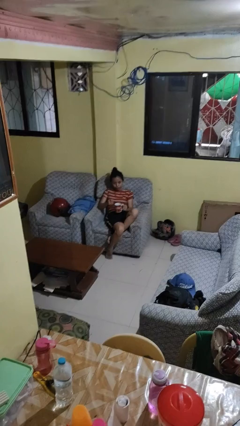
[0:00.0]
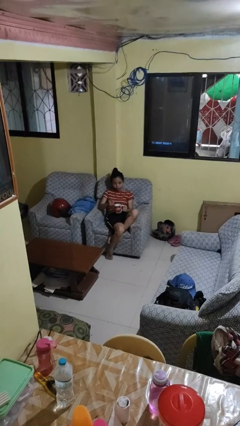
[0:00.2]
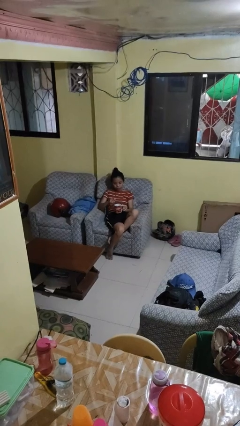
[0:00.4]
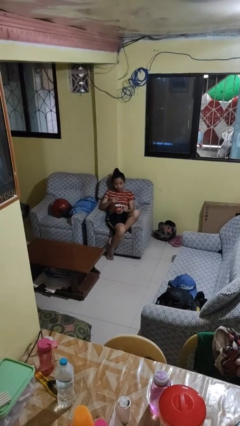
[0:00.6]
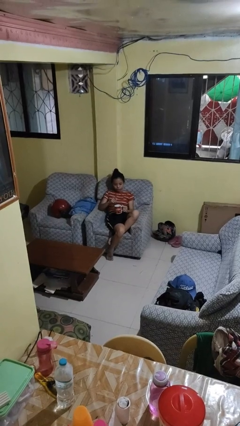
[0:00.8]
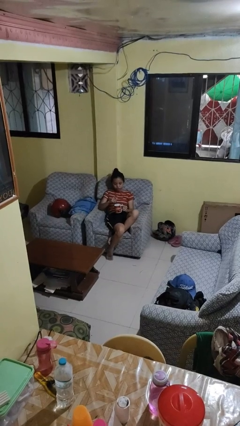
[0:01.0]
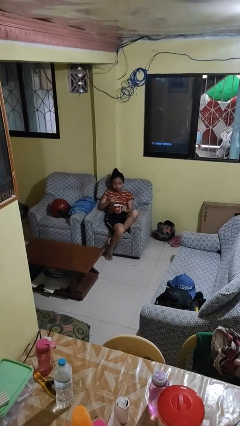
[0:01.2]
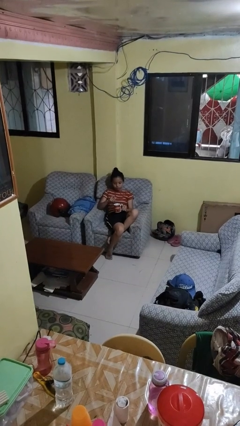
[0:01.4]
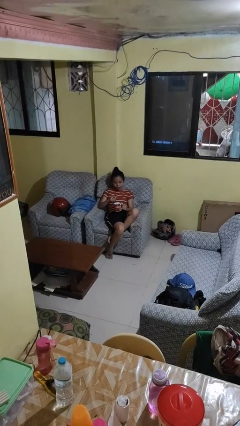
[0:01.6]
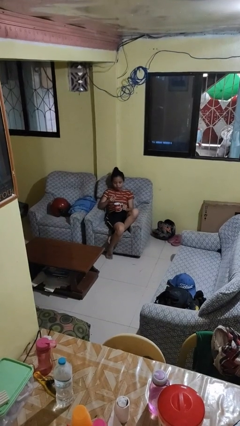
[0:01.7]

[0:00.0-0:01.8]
person stirs mug

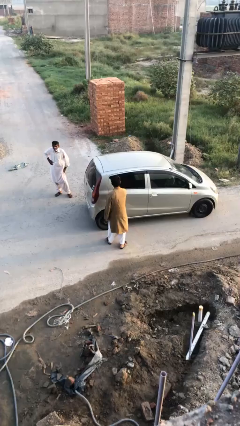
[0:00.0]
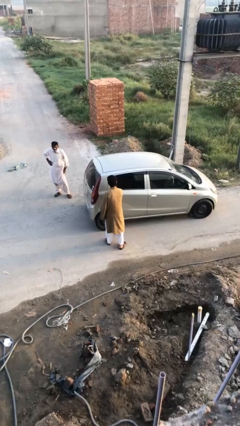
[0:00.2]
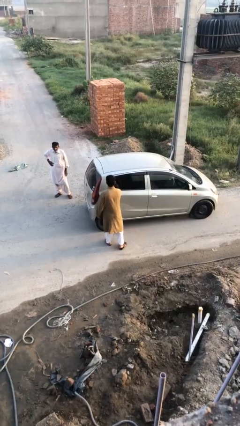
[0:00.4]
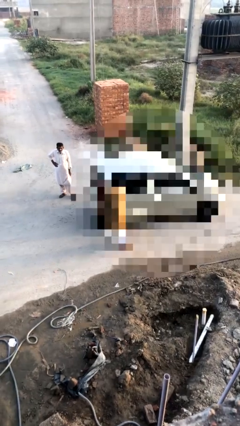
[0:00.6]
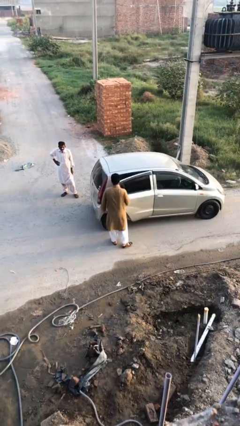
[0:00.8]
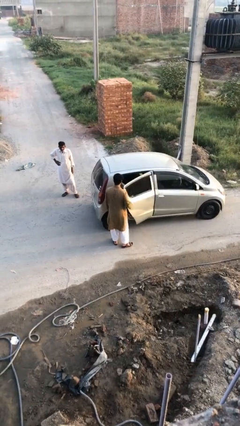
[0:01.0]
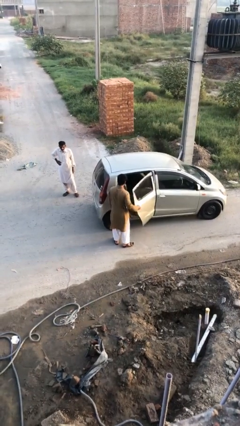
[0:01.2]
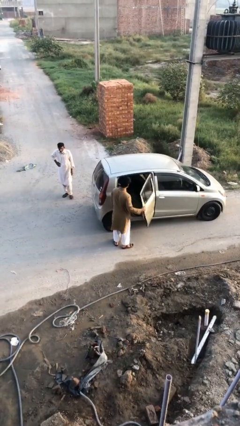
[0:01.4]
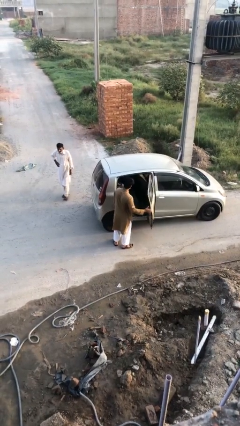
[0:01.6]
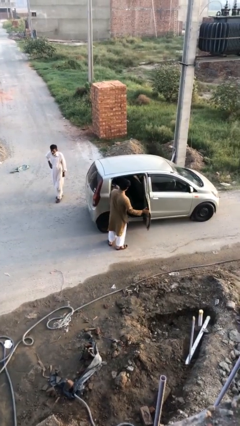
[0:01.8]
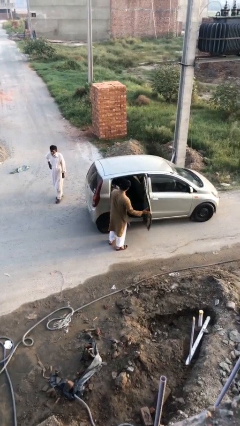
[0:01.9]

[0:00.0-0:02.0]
person opens car door

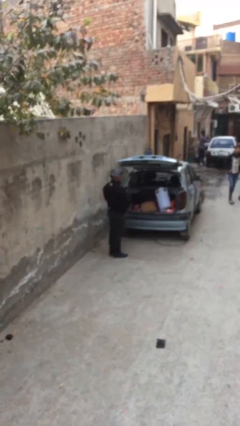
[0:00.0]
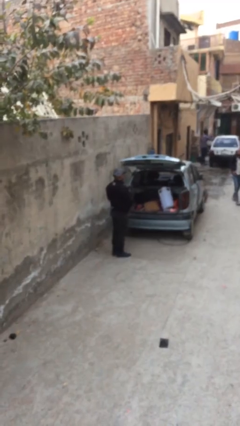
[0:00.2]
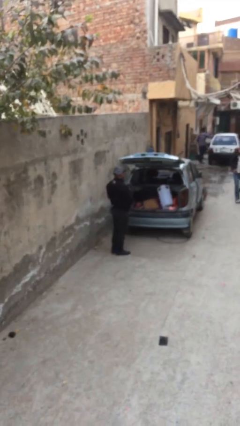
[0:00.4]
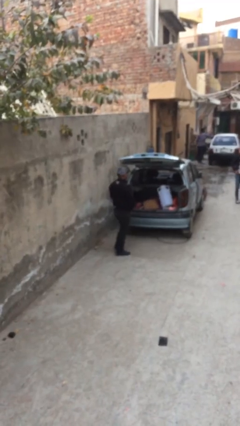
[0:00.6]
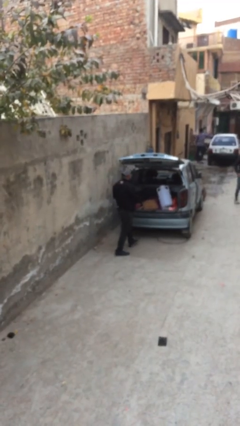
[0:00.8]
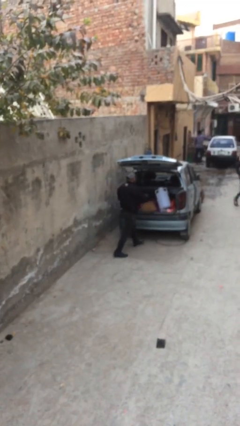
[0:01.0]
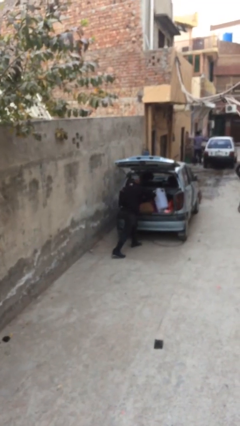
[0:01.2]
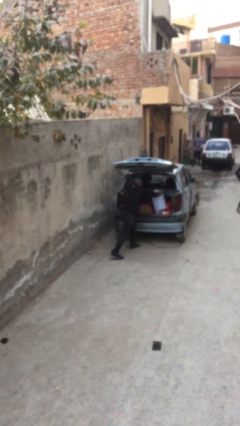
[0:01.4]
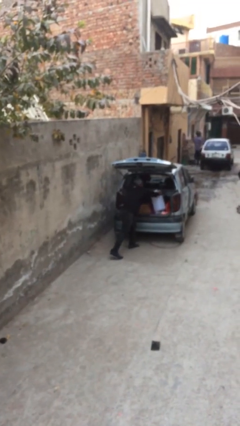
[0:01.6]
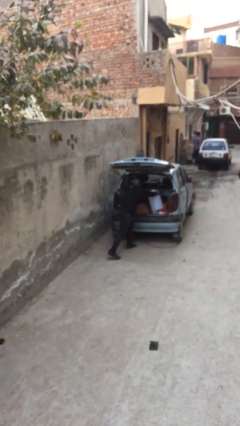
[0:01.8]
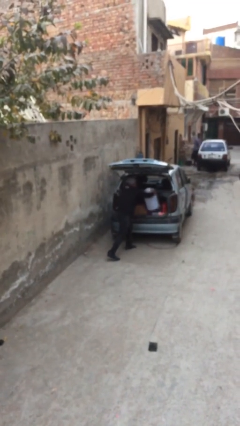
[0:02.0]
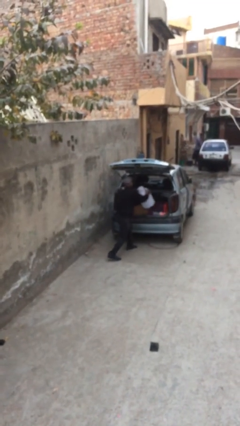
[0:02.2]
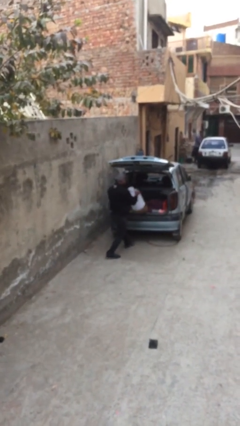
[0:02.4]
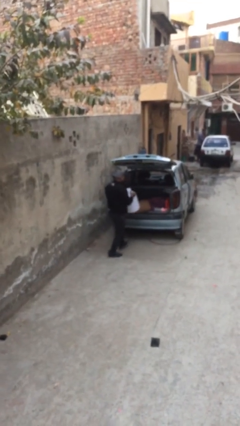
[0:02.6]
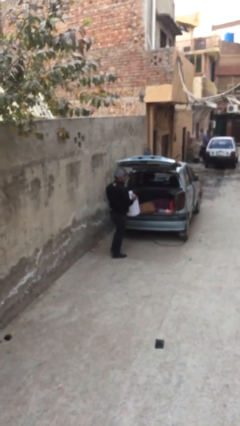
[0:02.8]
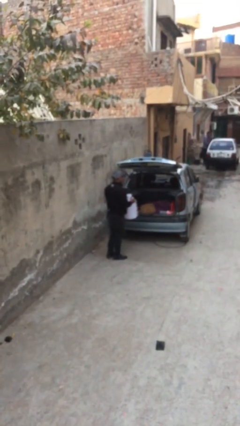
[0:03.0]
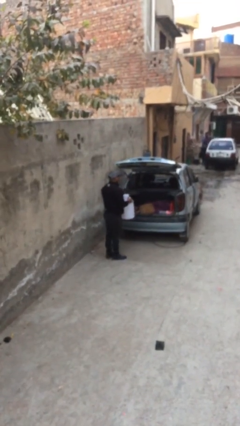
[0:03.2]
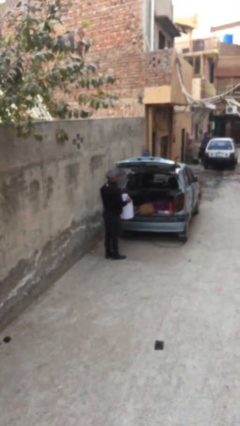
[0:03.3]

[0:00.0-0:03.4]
person unloads car

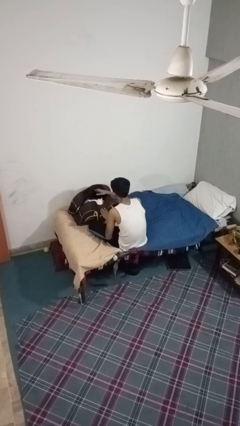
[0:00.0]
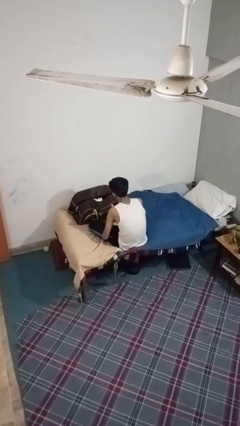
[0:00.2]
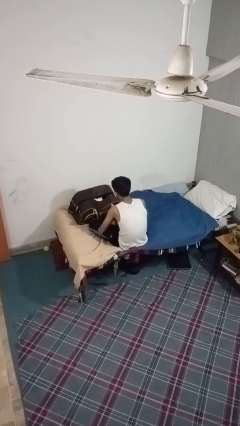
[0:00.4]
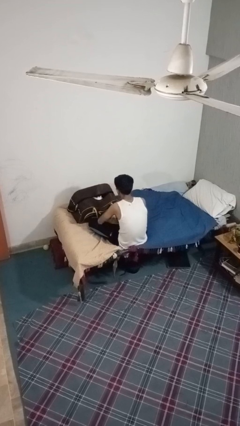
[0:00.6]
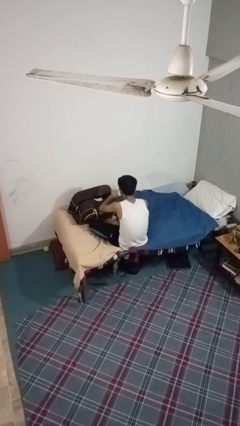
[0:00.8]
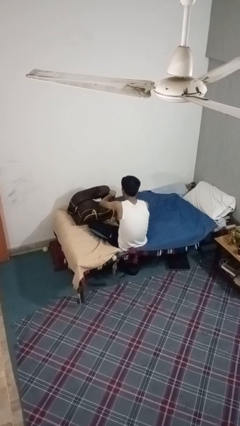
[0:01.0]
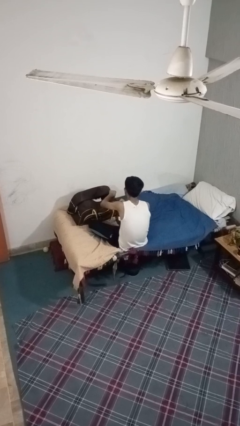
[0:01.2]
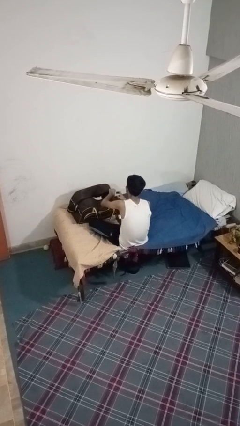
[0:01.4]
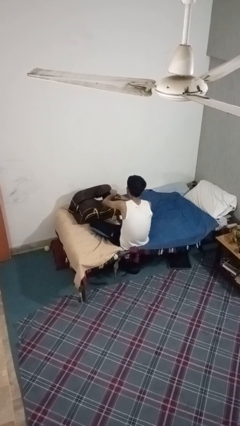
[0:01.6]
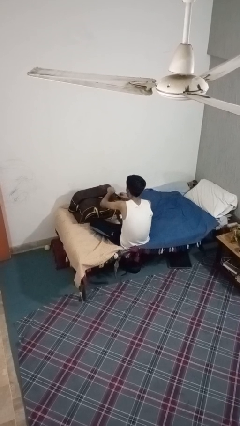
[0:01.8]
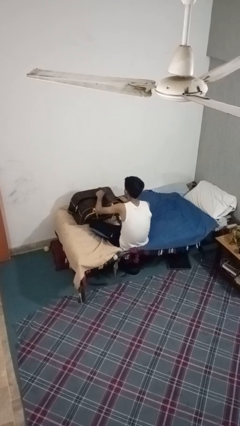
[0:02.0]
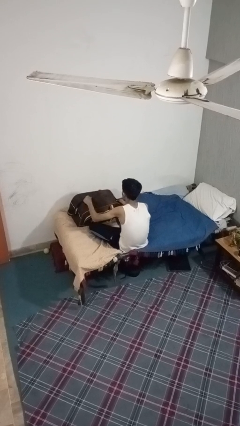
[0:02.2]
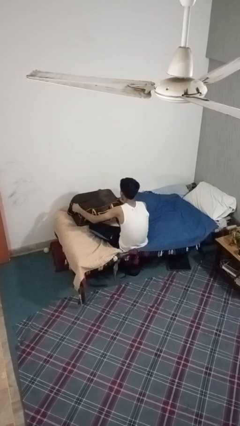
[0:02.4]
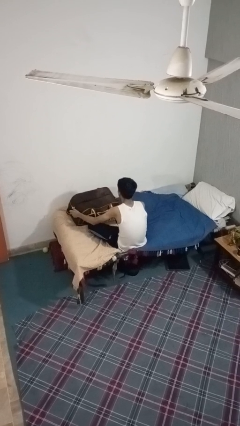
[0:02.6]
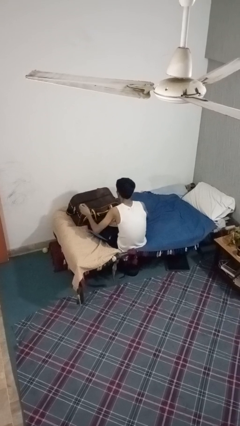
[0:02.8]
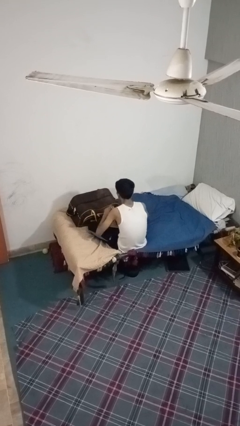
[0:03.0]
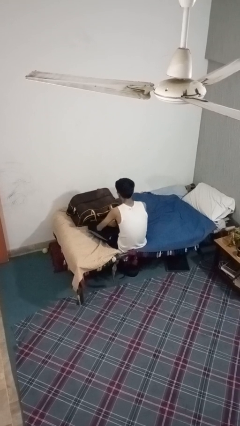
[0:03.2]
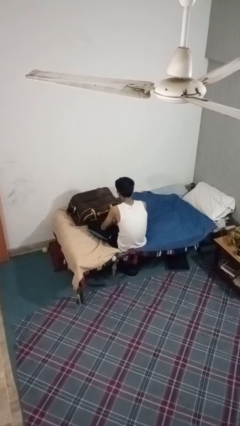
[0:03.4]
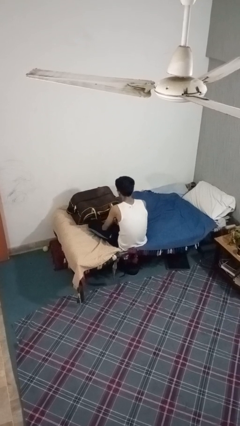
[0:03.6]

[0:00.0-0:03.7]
person closes suitcase

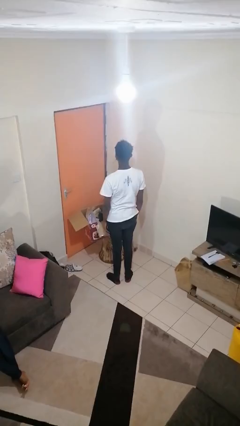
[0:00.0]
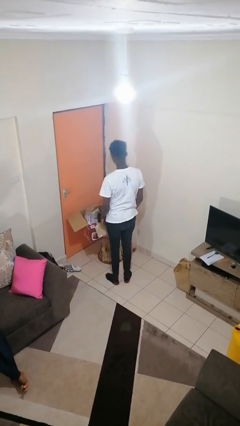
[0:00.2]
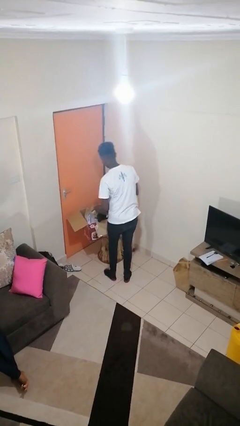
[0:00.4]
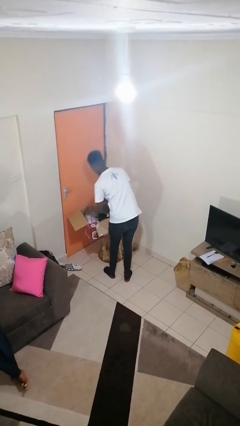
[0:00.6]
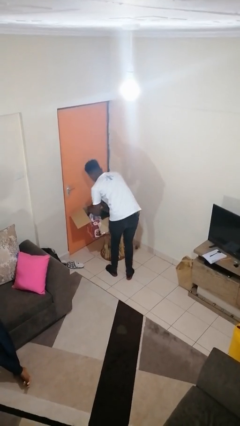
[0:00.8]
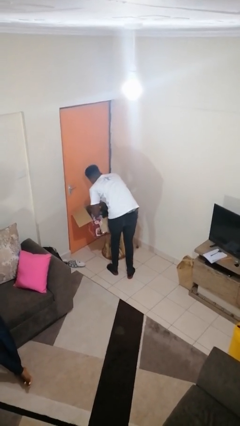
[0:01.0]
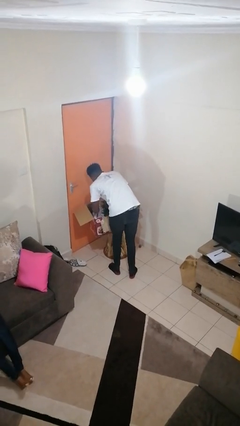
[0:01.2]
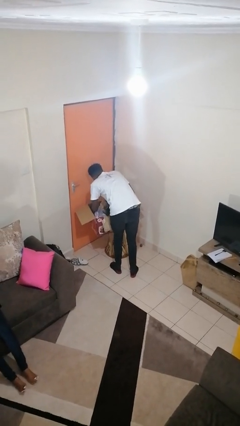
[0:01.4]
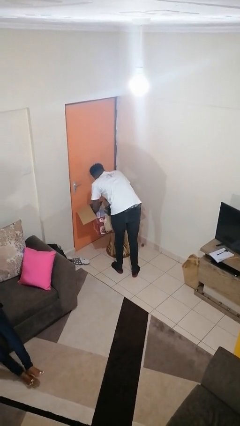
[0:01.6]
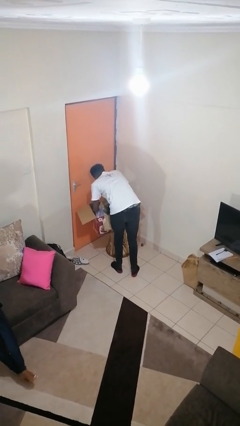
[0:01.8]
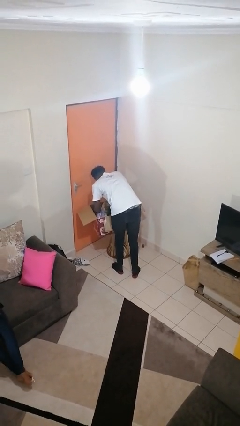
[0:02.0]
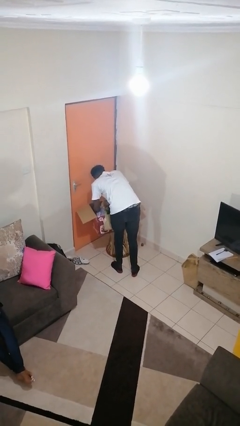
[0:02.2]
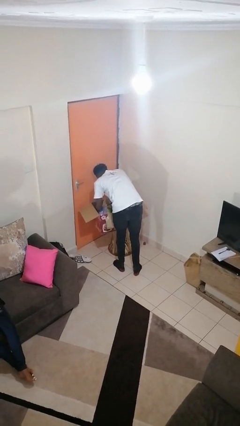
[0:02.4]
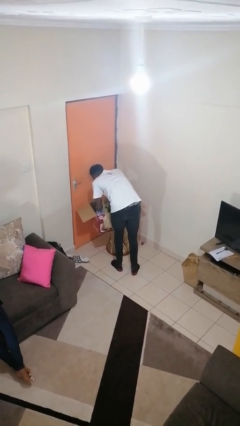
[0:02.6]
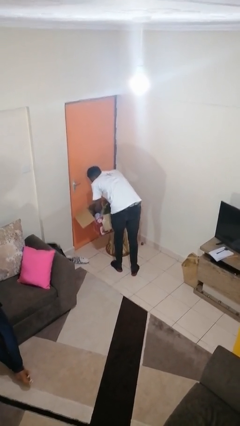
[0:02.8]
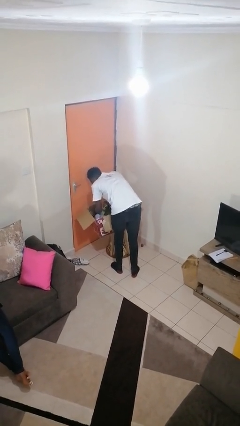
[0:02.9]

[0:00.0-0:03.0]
person searches in box

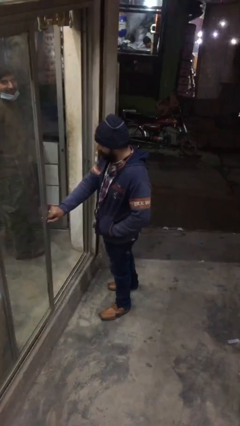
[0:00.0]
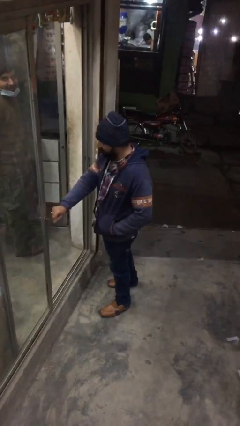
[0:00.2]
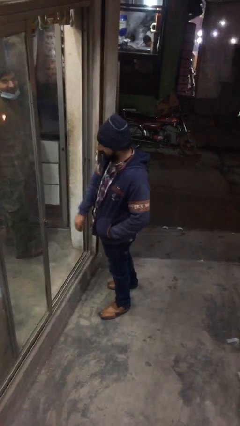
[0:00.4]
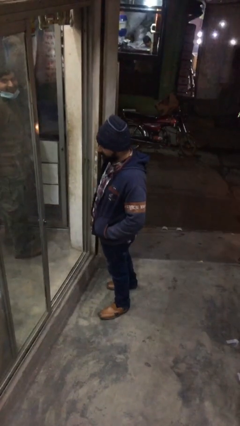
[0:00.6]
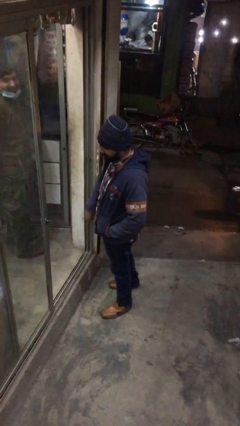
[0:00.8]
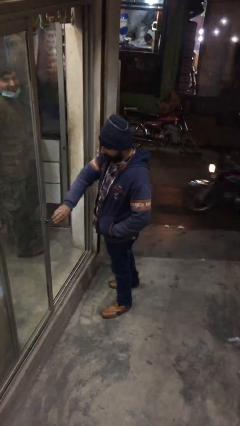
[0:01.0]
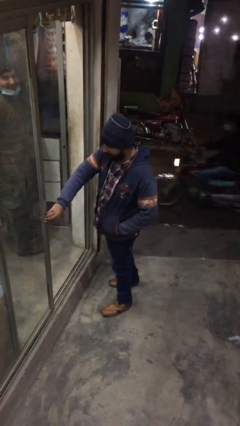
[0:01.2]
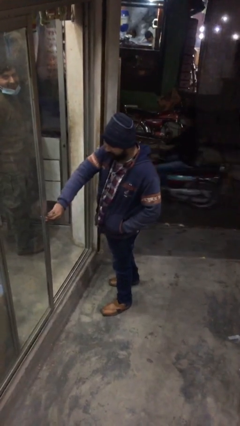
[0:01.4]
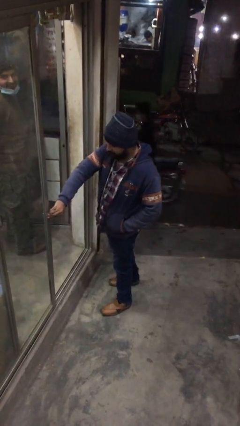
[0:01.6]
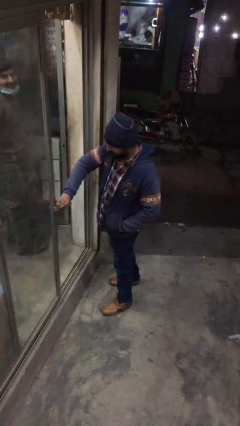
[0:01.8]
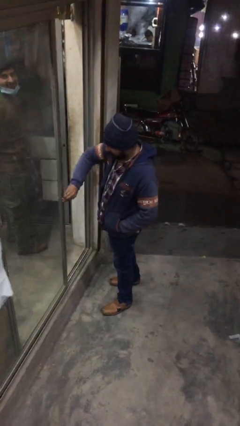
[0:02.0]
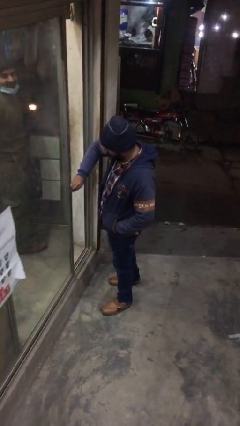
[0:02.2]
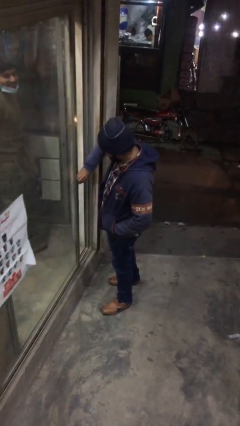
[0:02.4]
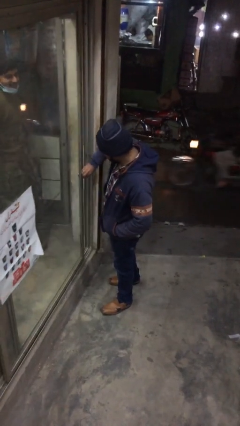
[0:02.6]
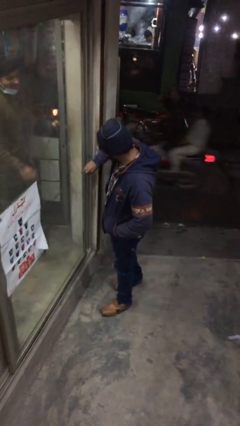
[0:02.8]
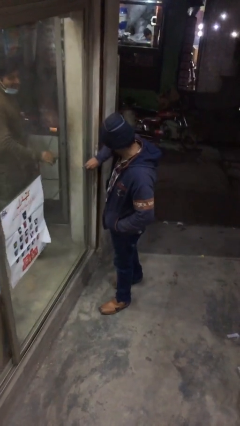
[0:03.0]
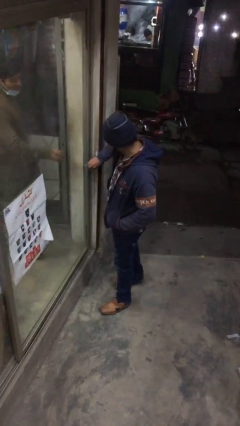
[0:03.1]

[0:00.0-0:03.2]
person closes facility door

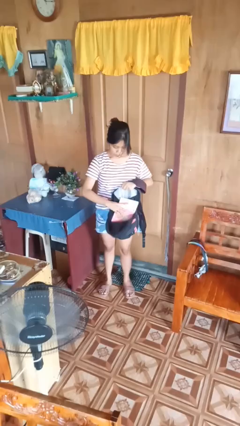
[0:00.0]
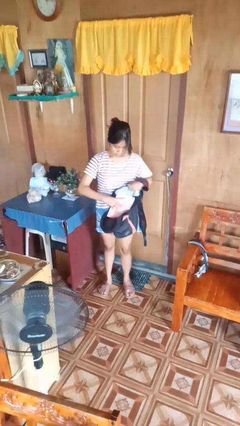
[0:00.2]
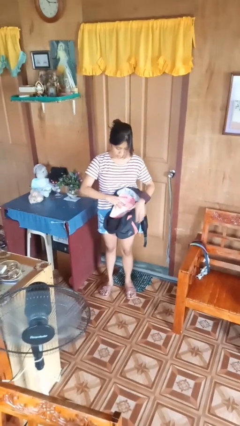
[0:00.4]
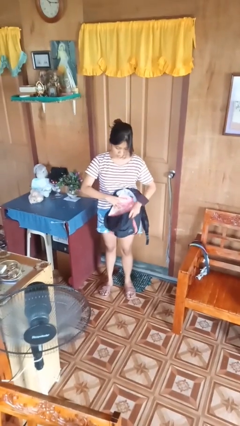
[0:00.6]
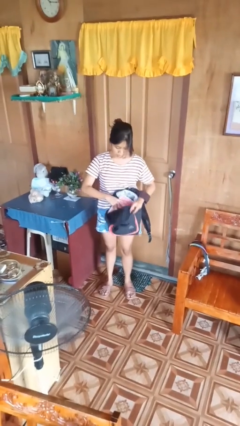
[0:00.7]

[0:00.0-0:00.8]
person puts object into backpack
